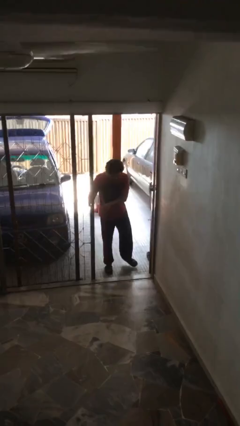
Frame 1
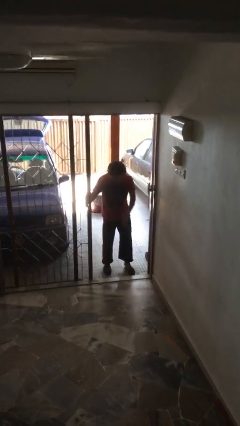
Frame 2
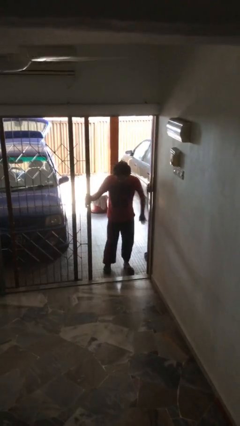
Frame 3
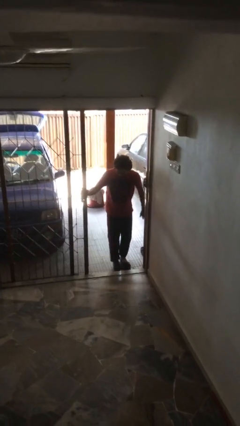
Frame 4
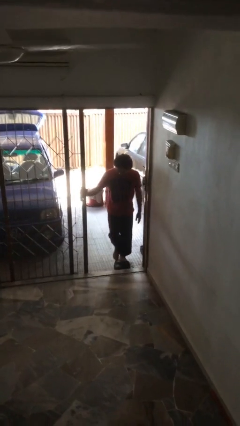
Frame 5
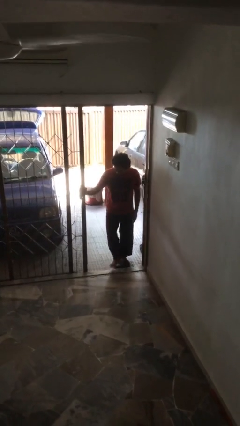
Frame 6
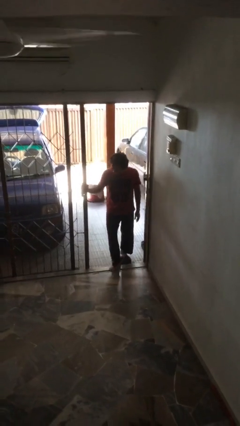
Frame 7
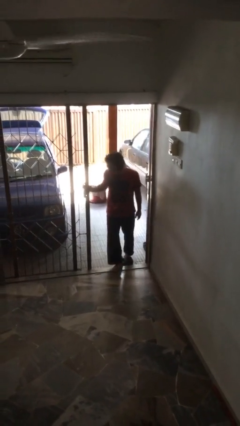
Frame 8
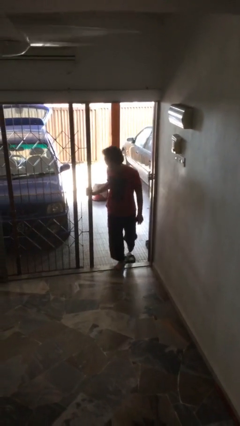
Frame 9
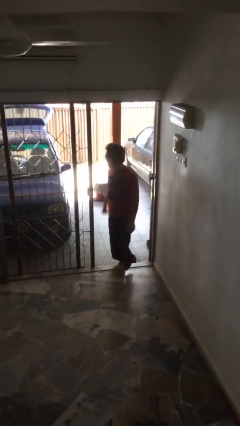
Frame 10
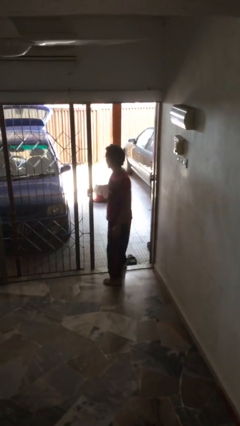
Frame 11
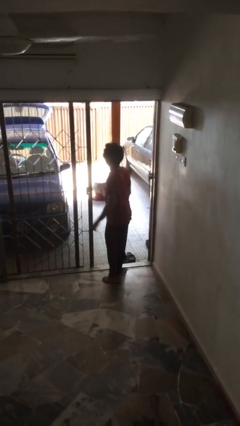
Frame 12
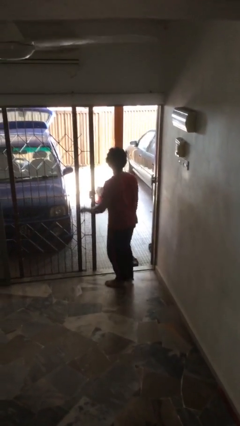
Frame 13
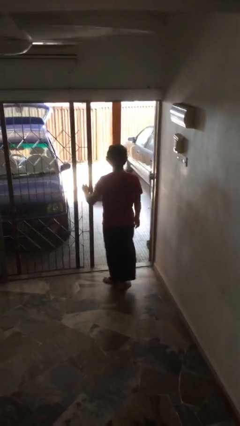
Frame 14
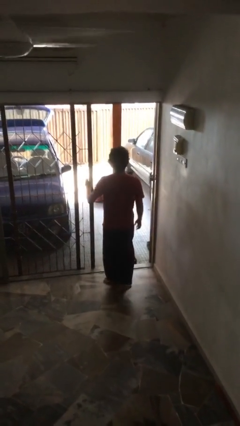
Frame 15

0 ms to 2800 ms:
person enters scene through structure

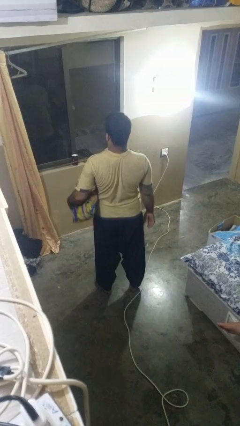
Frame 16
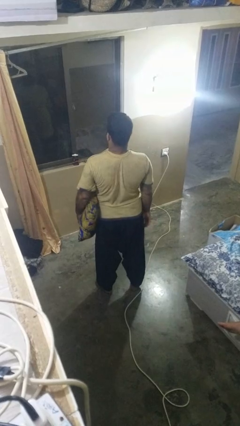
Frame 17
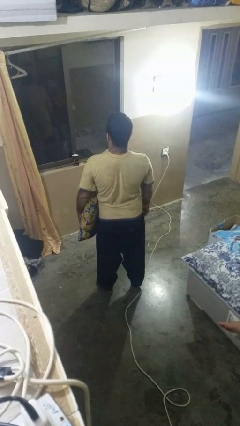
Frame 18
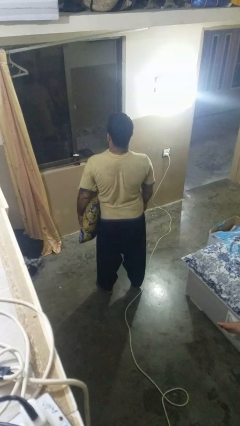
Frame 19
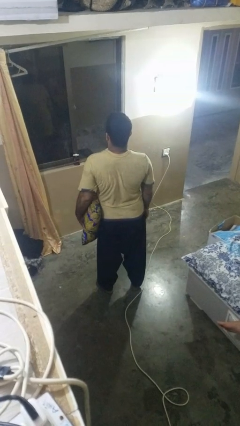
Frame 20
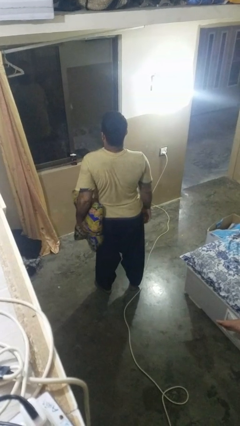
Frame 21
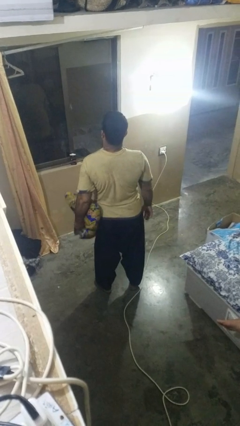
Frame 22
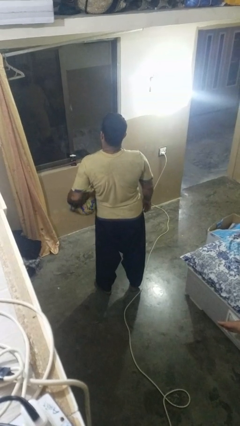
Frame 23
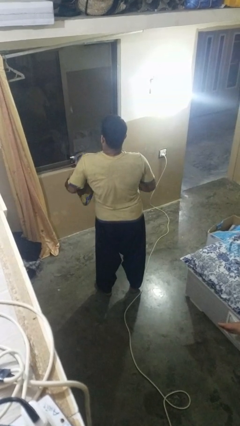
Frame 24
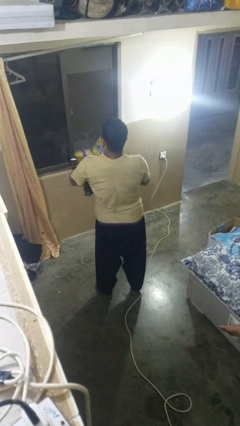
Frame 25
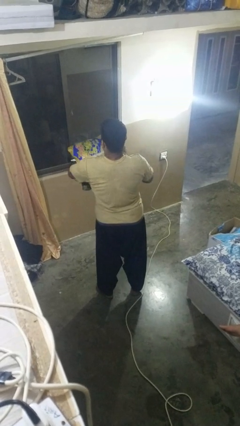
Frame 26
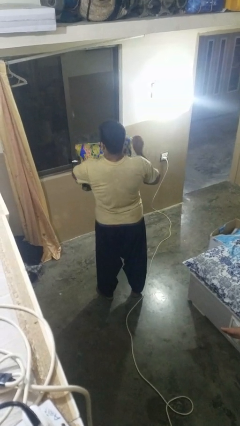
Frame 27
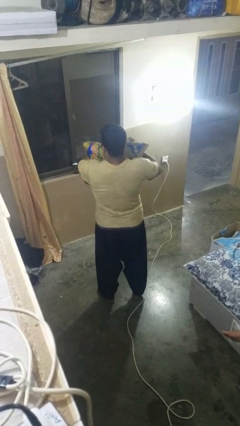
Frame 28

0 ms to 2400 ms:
person squeezes object

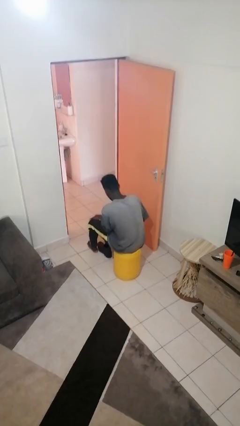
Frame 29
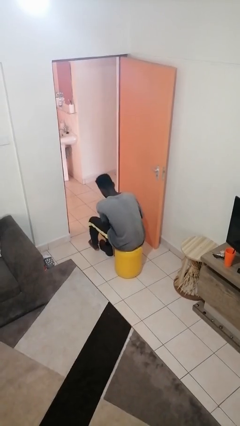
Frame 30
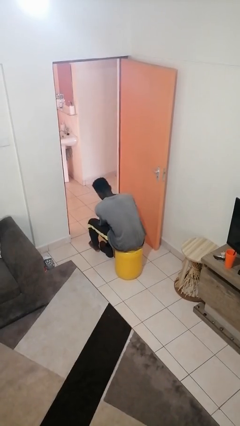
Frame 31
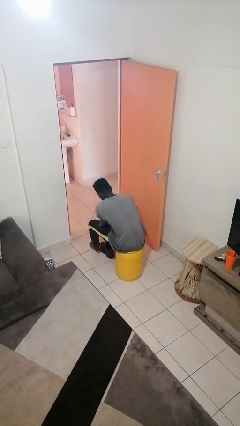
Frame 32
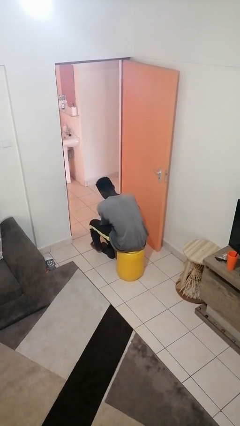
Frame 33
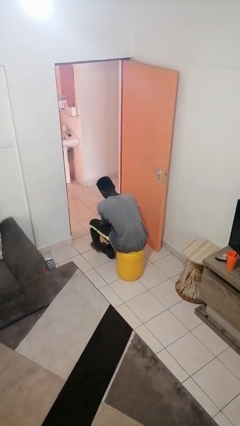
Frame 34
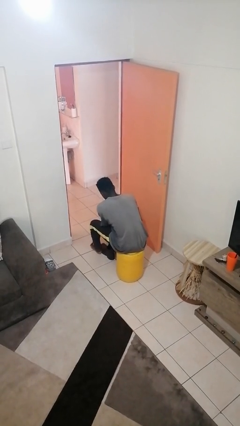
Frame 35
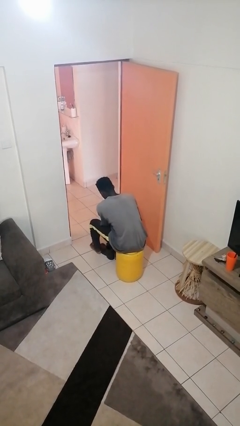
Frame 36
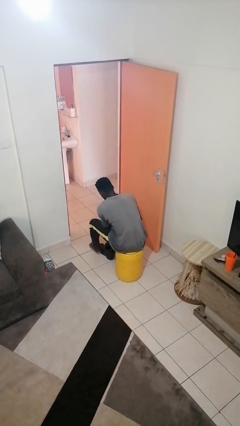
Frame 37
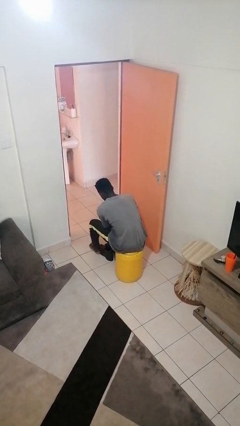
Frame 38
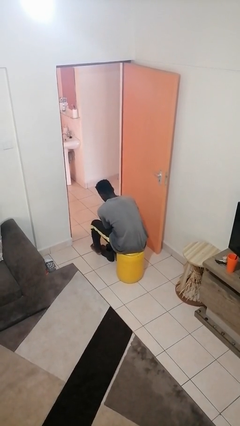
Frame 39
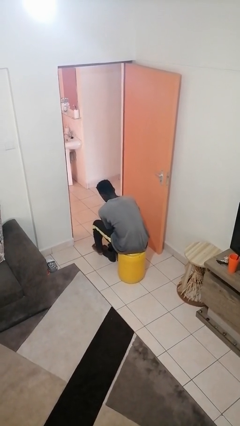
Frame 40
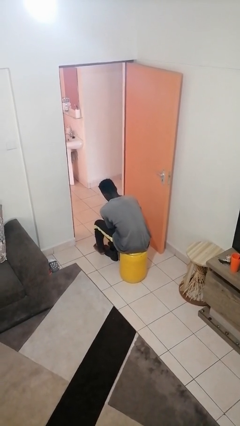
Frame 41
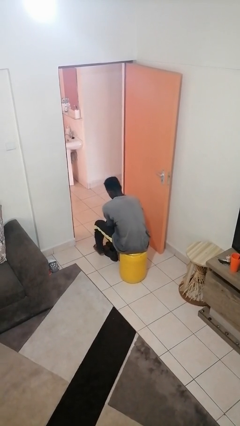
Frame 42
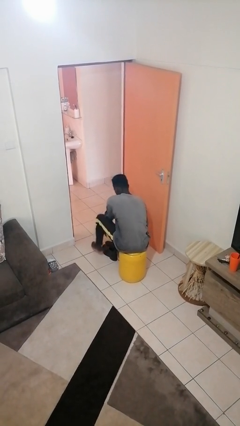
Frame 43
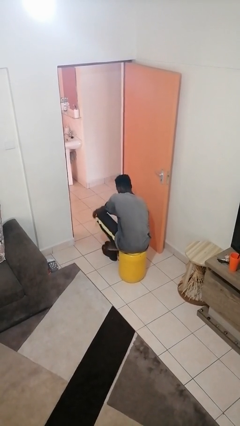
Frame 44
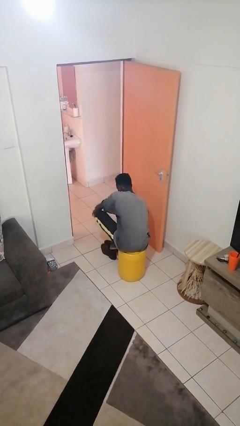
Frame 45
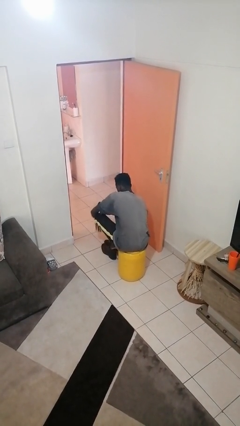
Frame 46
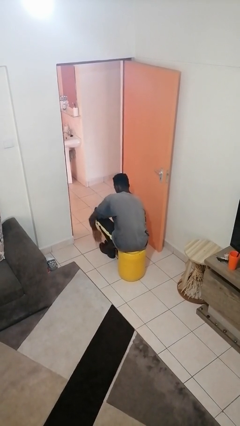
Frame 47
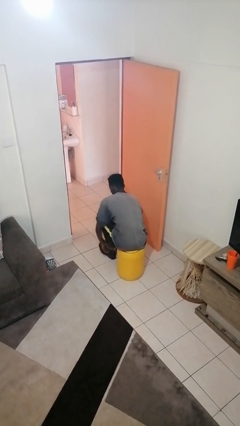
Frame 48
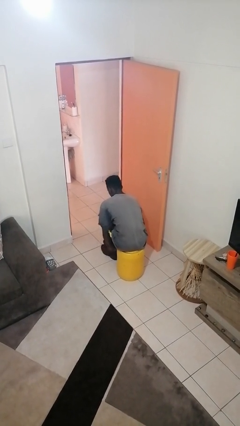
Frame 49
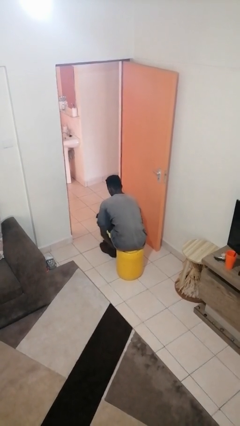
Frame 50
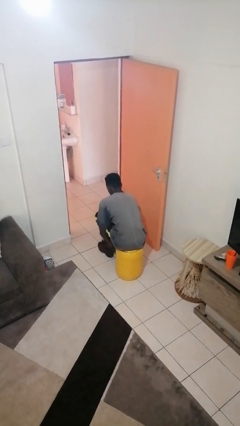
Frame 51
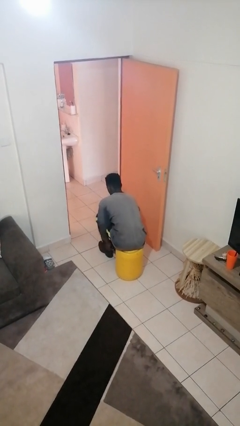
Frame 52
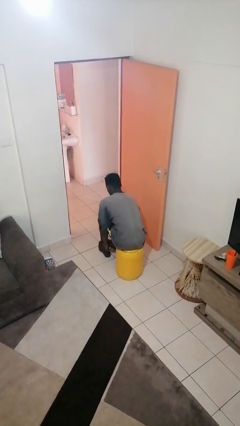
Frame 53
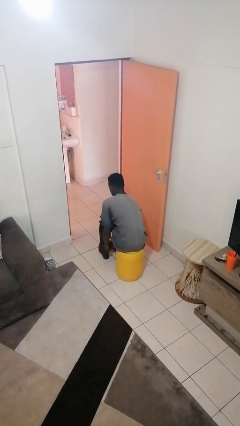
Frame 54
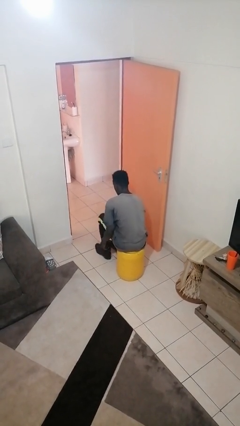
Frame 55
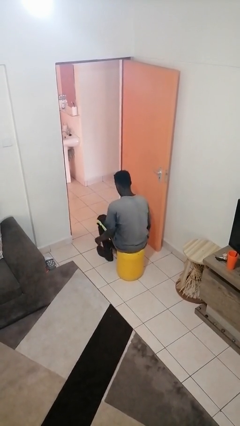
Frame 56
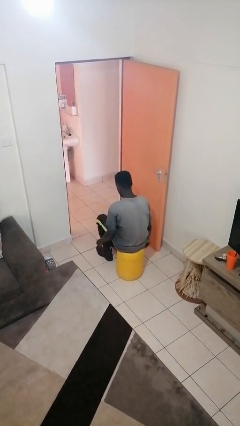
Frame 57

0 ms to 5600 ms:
person puts on shoes

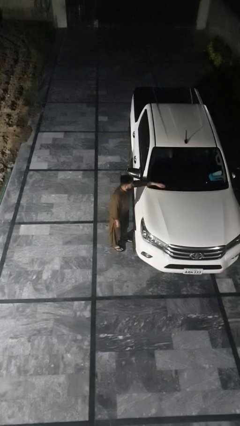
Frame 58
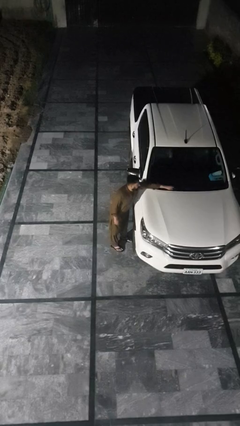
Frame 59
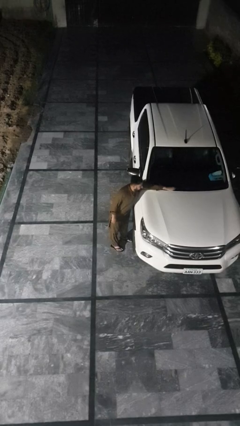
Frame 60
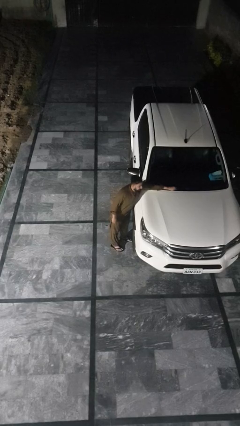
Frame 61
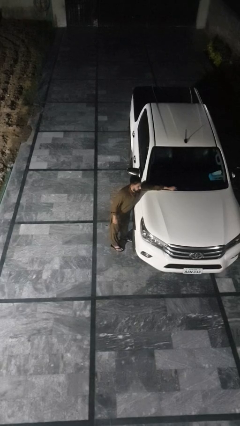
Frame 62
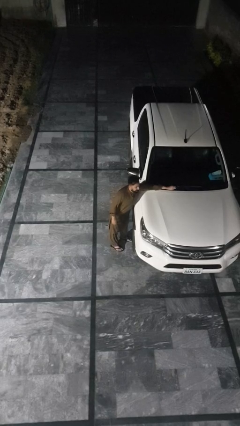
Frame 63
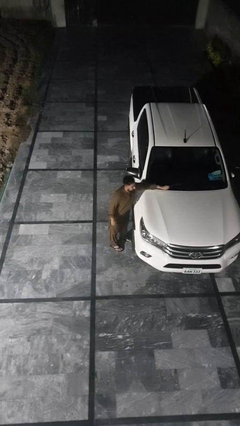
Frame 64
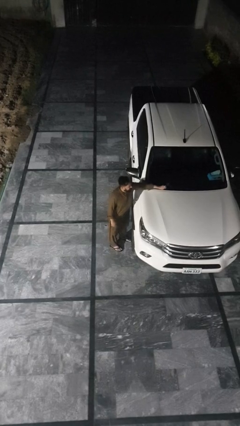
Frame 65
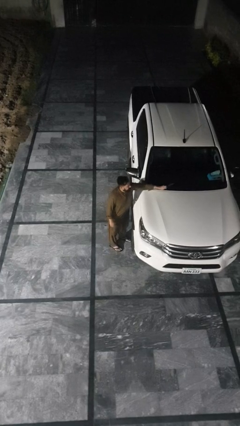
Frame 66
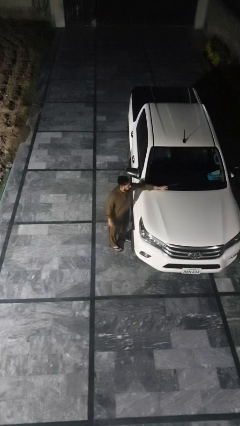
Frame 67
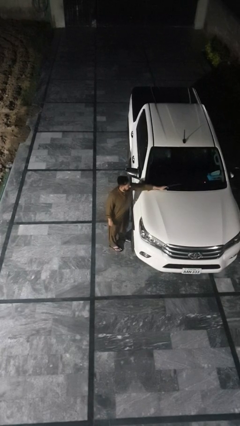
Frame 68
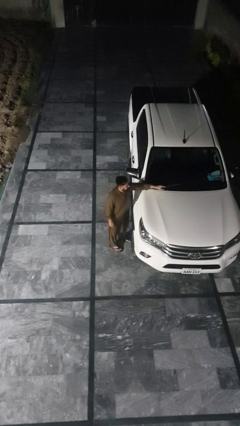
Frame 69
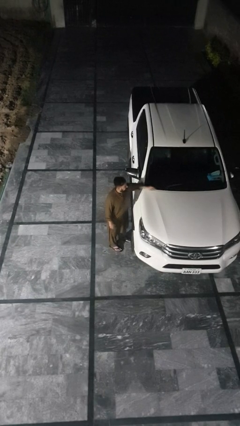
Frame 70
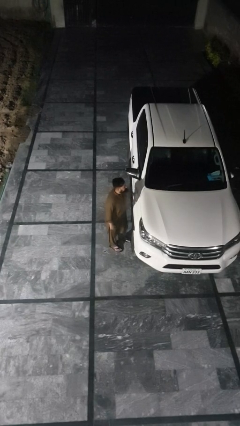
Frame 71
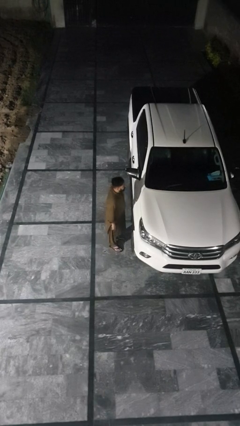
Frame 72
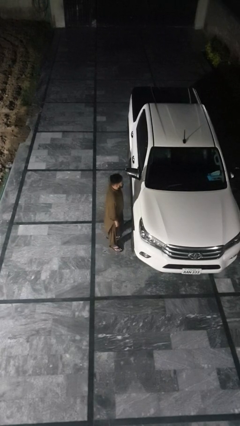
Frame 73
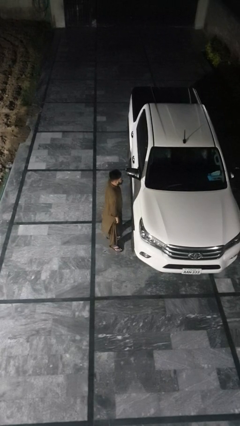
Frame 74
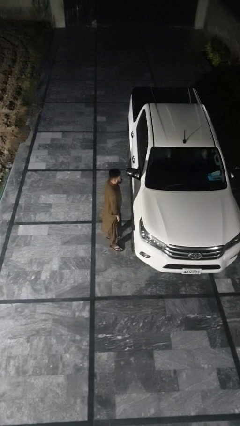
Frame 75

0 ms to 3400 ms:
person flips up car wipers

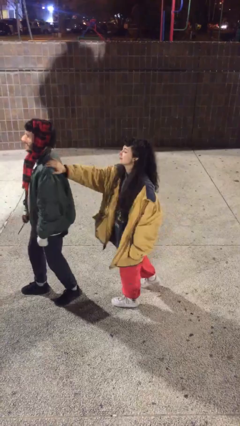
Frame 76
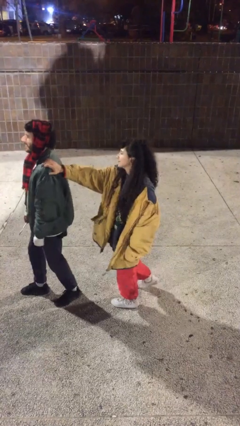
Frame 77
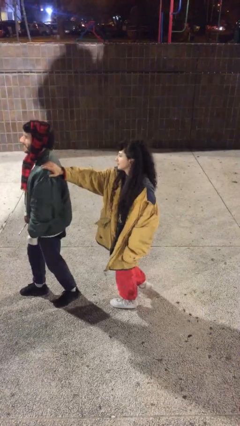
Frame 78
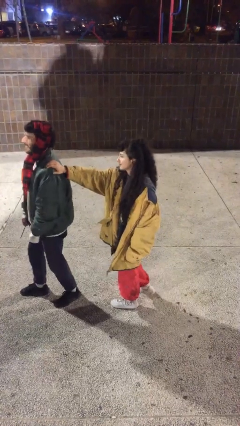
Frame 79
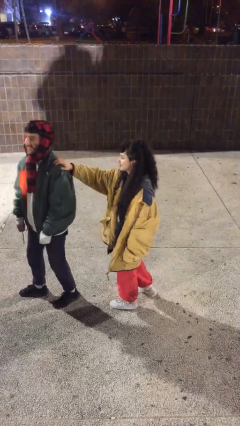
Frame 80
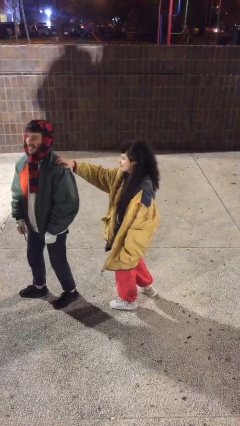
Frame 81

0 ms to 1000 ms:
person grabs person by shoulder

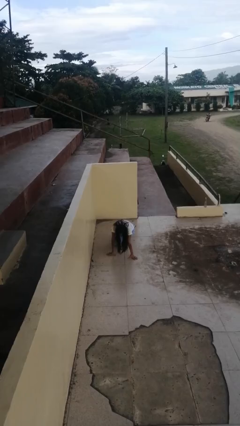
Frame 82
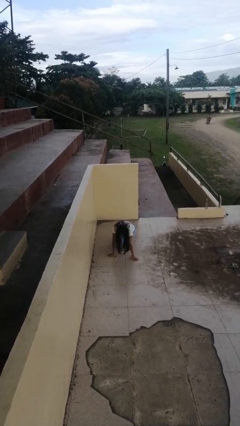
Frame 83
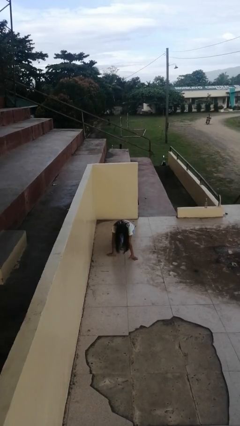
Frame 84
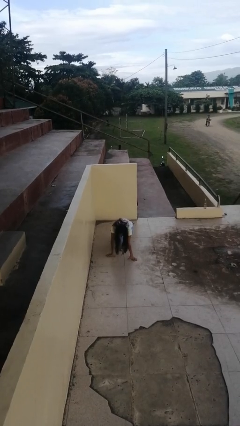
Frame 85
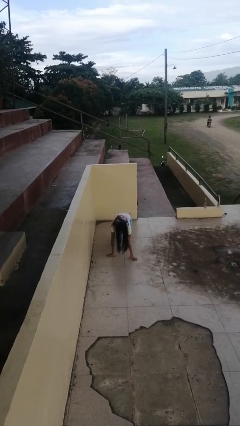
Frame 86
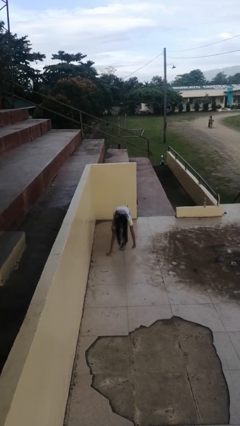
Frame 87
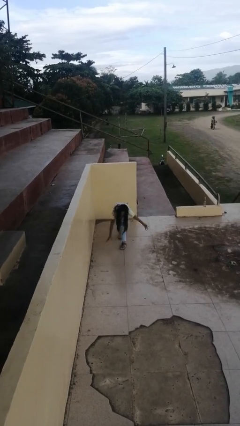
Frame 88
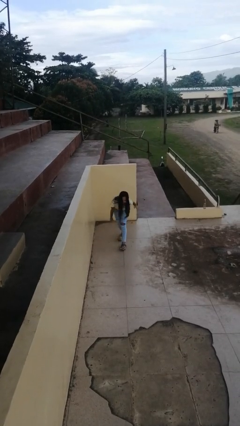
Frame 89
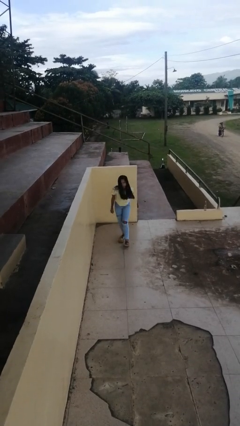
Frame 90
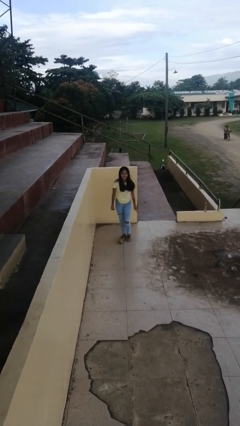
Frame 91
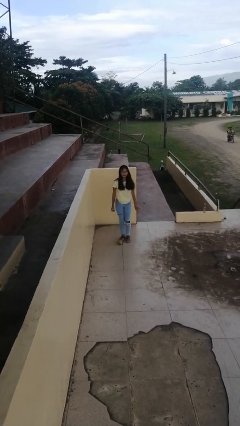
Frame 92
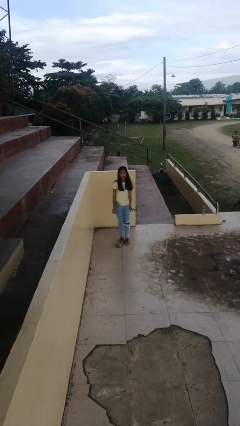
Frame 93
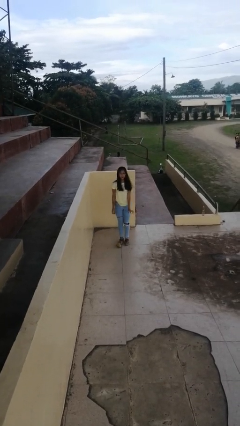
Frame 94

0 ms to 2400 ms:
person stands up from floor
